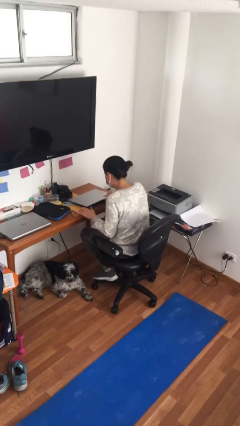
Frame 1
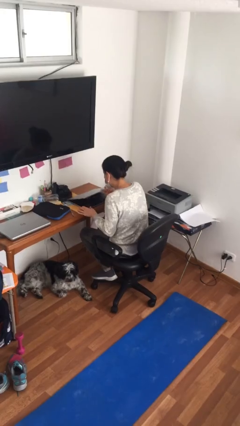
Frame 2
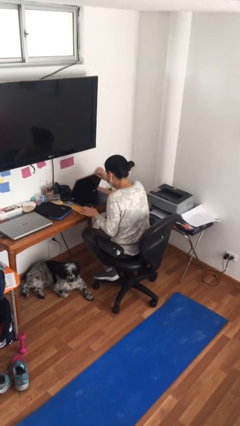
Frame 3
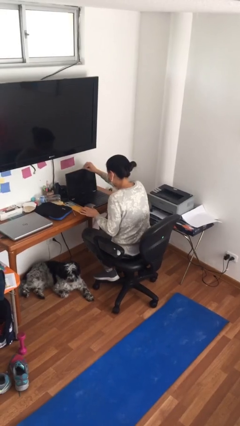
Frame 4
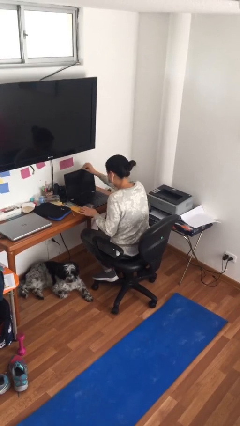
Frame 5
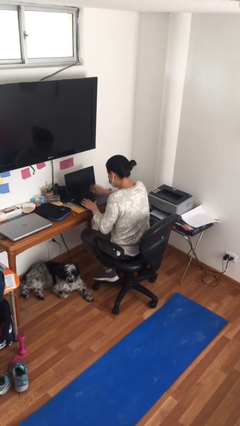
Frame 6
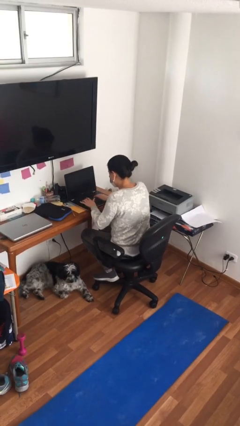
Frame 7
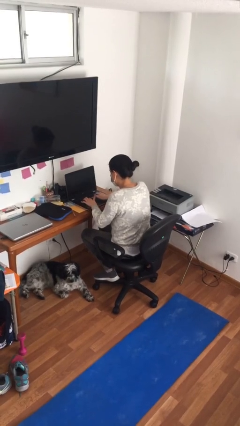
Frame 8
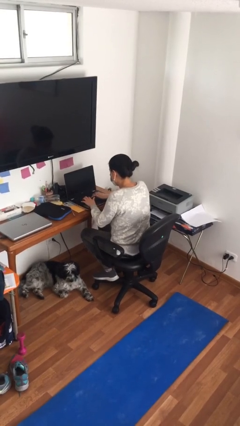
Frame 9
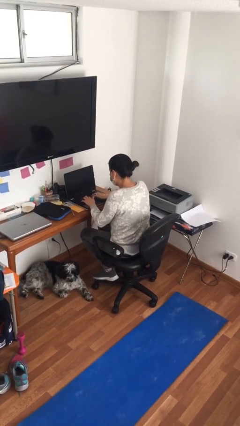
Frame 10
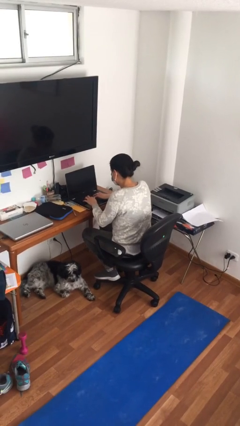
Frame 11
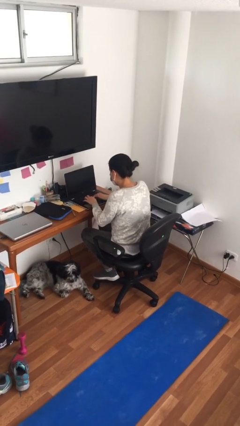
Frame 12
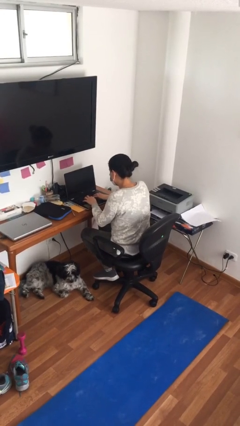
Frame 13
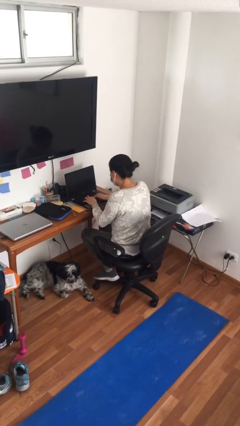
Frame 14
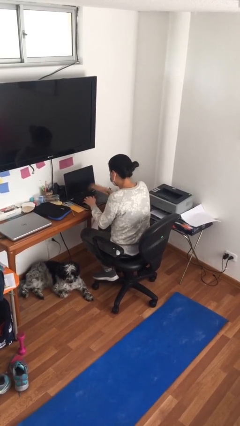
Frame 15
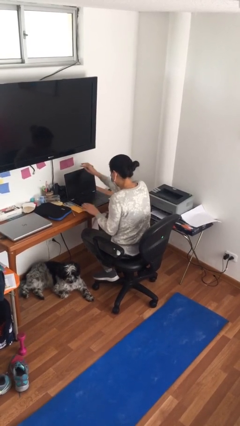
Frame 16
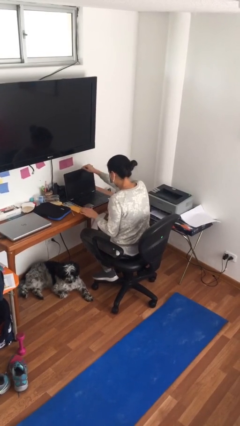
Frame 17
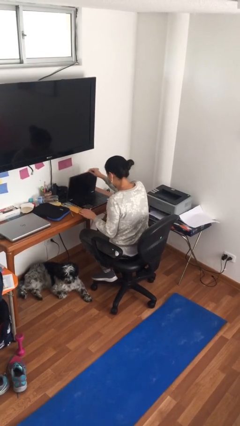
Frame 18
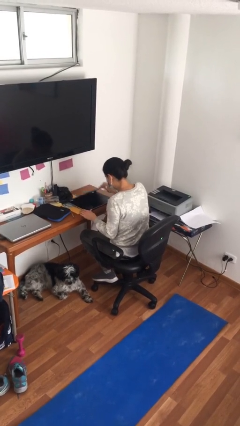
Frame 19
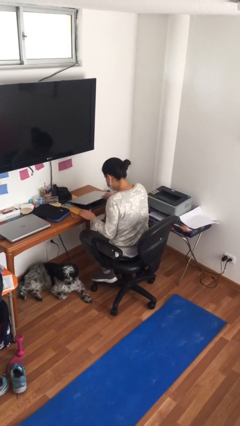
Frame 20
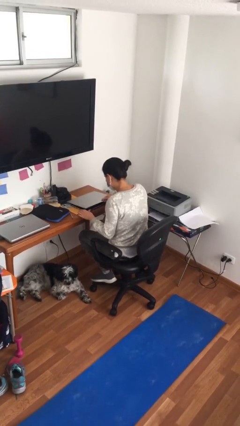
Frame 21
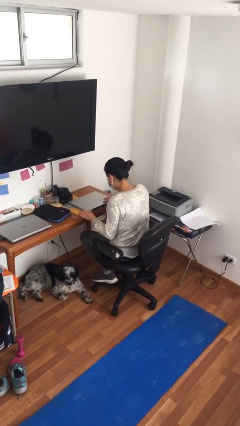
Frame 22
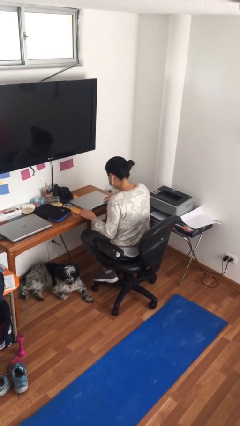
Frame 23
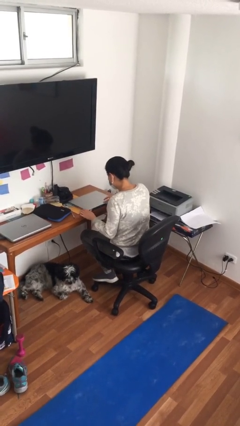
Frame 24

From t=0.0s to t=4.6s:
person interacts with laptop

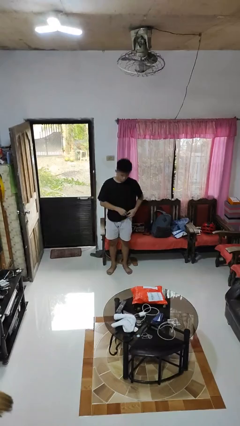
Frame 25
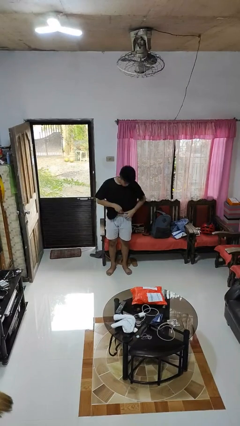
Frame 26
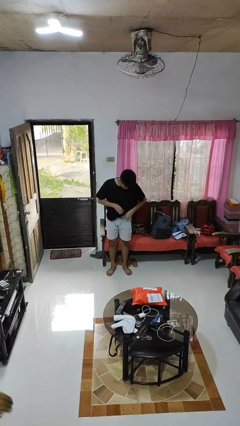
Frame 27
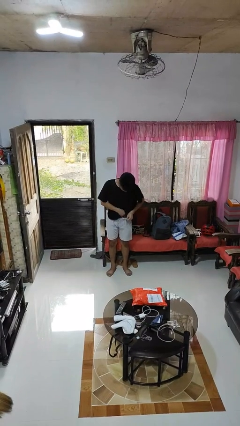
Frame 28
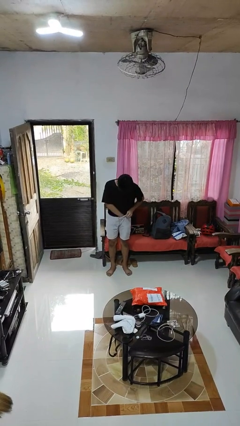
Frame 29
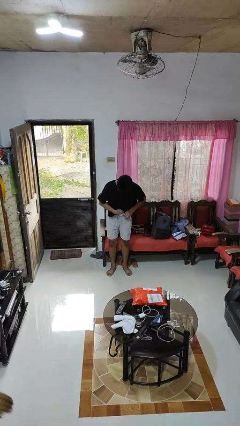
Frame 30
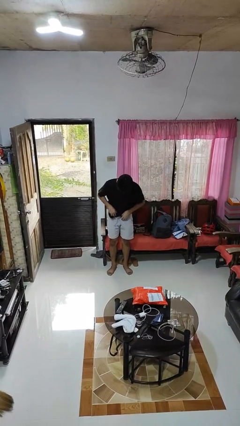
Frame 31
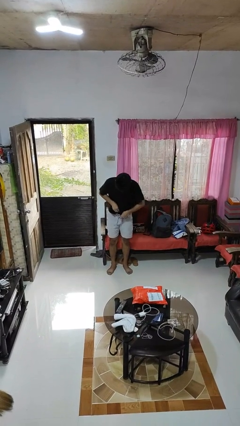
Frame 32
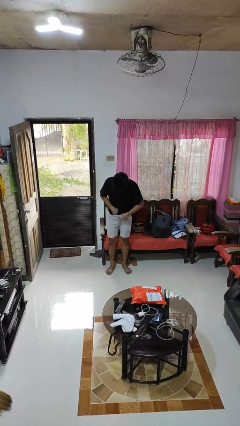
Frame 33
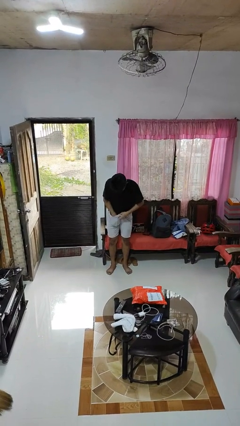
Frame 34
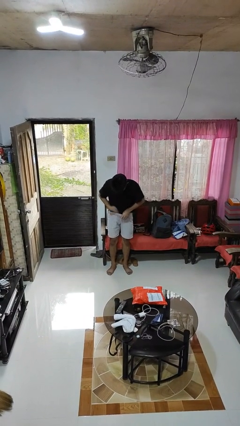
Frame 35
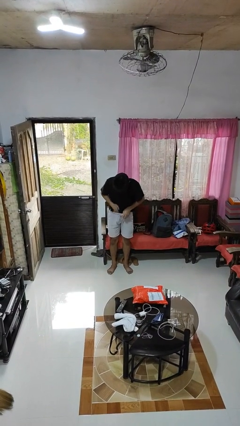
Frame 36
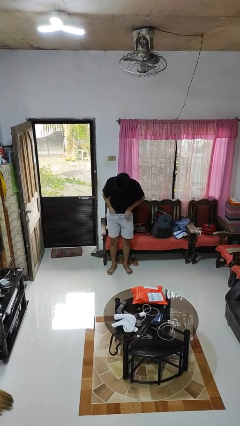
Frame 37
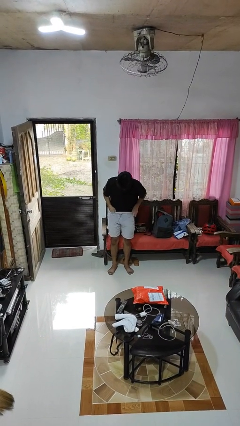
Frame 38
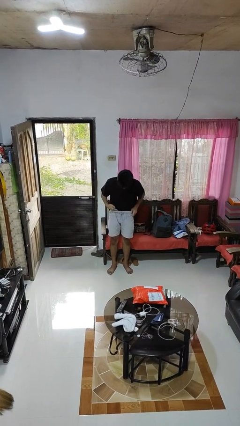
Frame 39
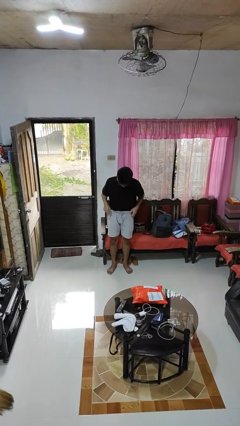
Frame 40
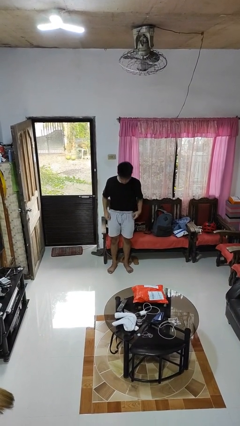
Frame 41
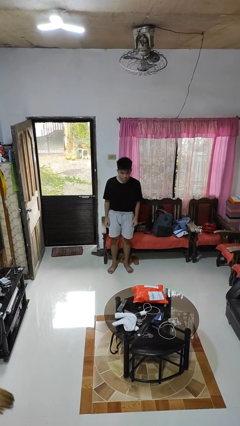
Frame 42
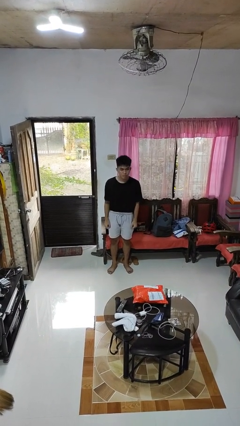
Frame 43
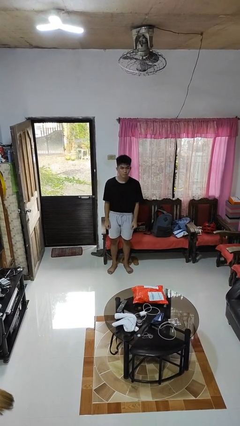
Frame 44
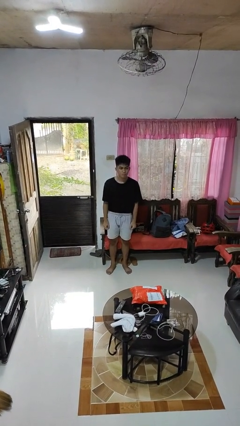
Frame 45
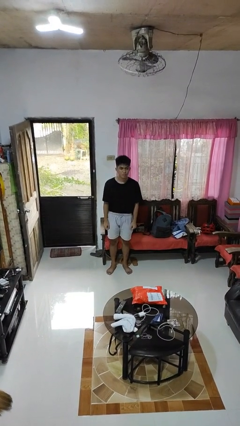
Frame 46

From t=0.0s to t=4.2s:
person tucks in shirt

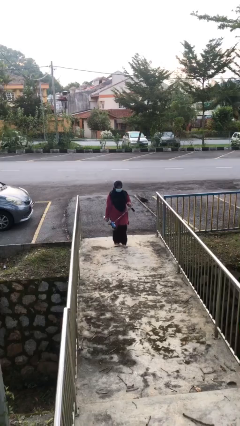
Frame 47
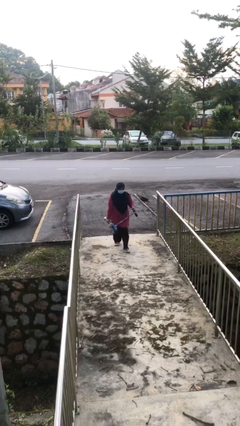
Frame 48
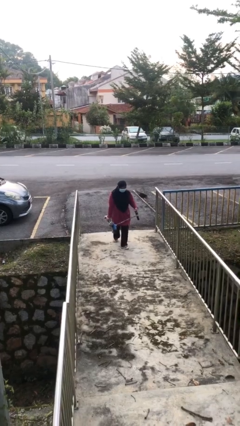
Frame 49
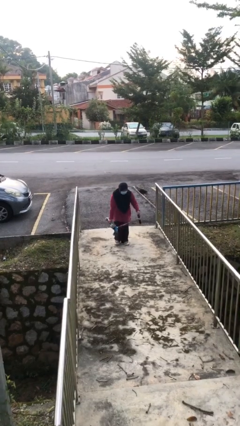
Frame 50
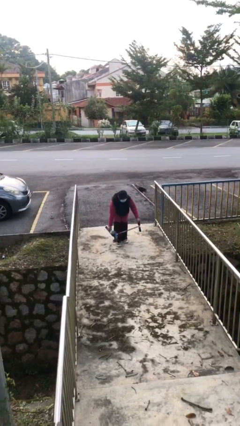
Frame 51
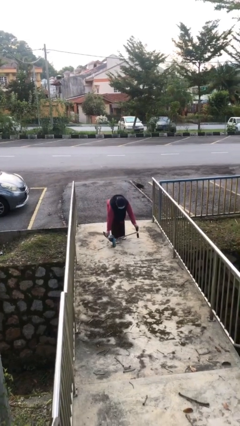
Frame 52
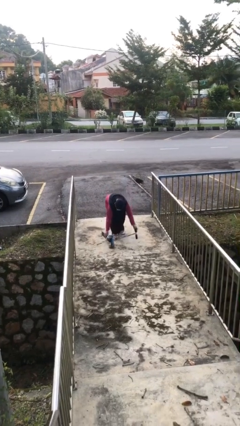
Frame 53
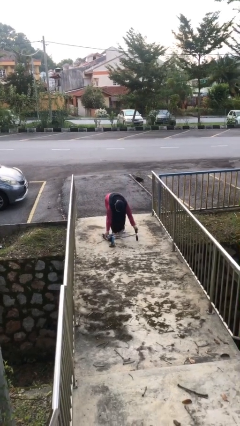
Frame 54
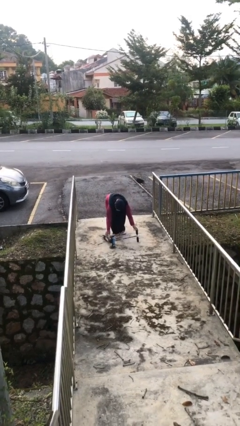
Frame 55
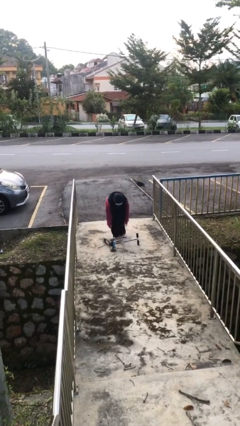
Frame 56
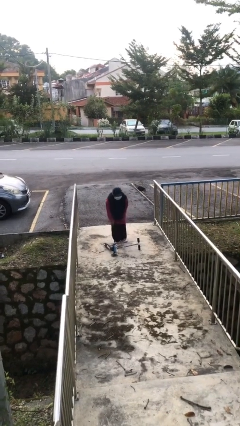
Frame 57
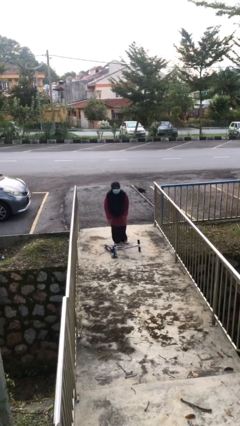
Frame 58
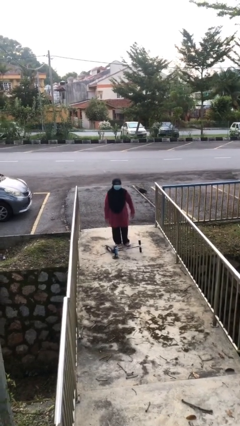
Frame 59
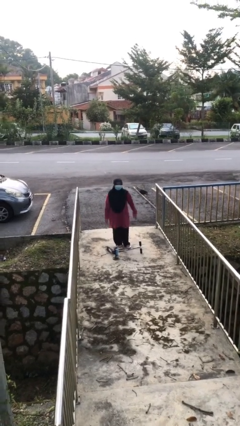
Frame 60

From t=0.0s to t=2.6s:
person puts down object on floor

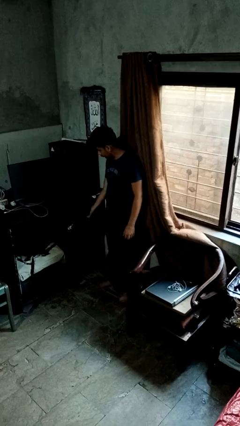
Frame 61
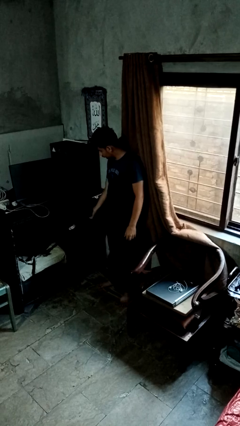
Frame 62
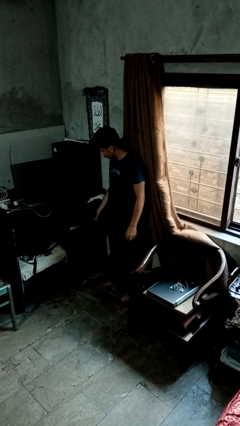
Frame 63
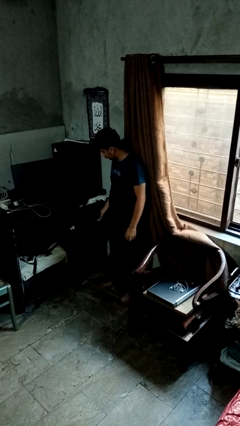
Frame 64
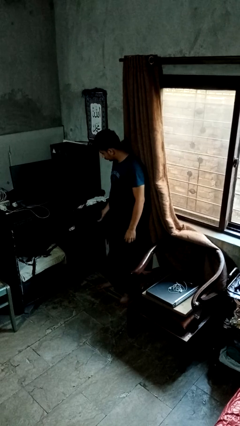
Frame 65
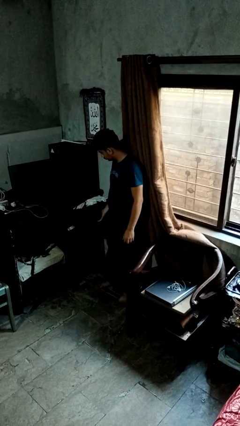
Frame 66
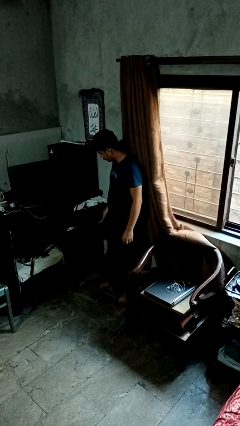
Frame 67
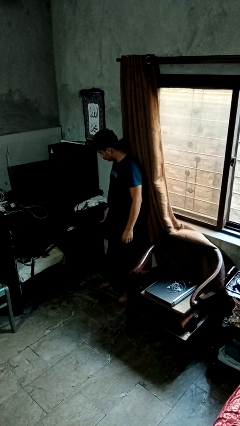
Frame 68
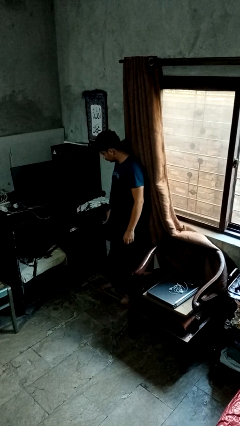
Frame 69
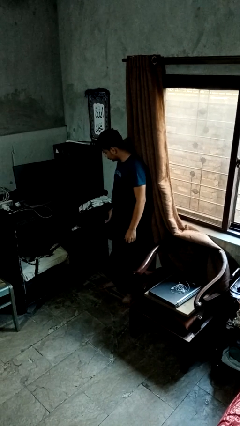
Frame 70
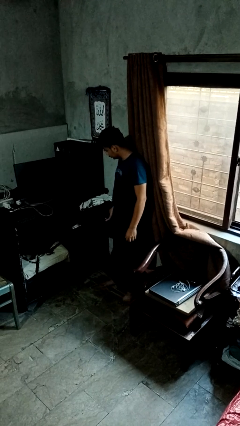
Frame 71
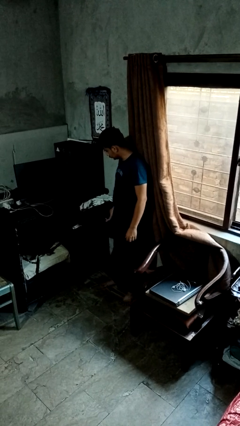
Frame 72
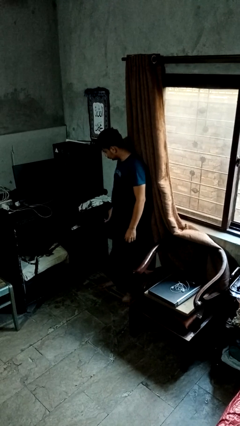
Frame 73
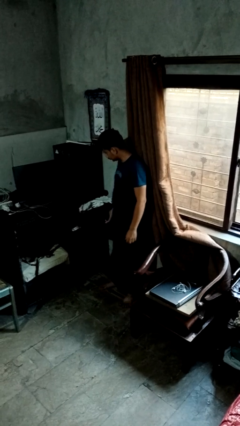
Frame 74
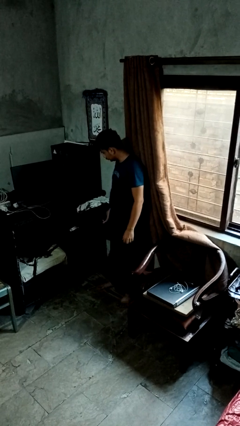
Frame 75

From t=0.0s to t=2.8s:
person opens dresser drawer

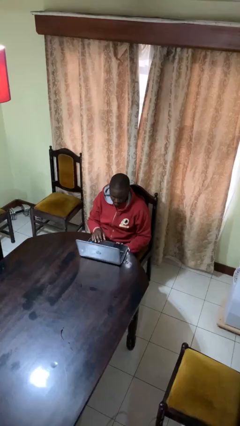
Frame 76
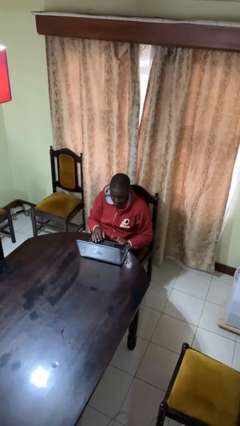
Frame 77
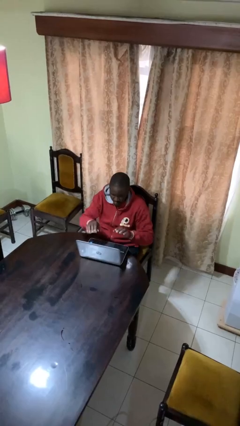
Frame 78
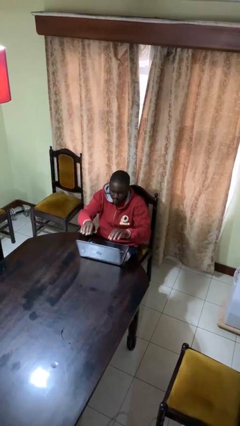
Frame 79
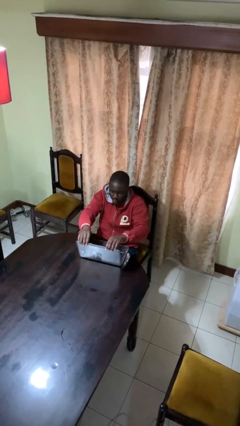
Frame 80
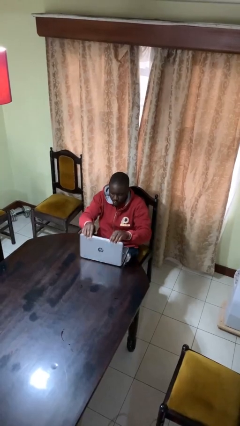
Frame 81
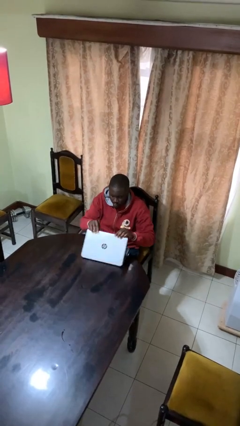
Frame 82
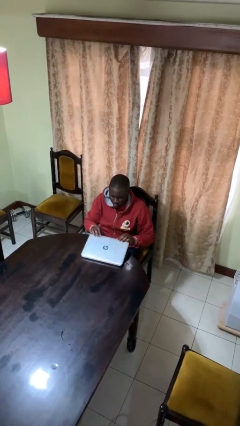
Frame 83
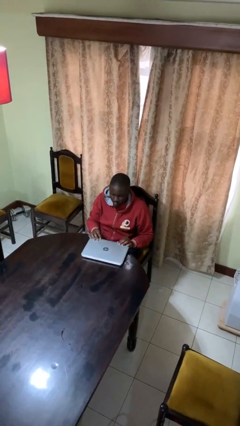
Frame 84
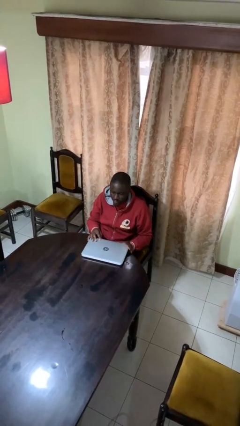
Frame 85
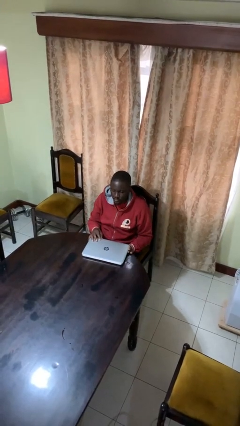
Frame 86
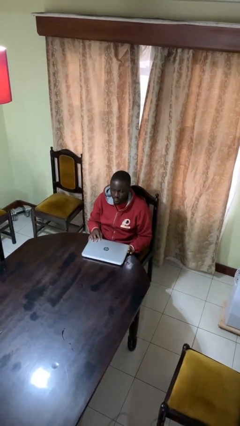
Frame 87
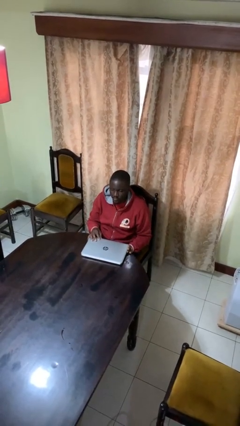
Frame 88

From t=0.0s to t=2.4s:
person closes laptop

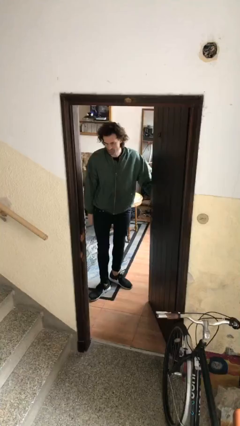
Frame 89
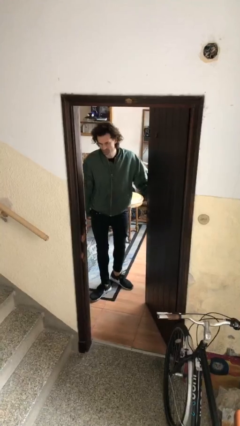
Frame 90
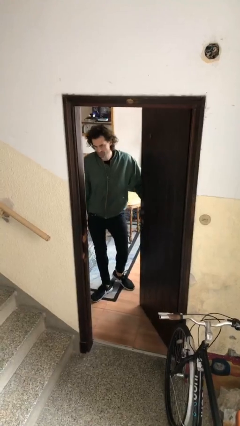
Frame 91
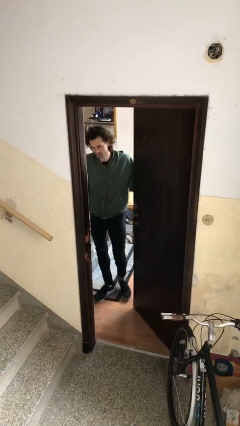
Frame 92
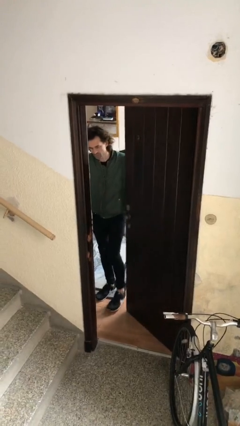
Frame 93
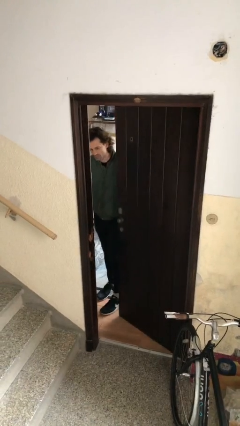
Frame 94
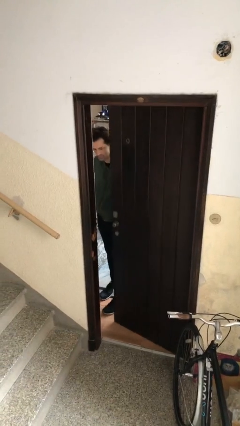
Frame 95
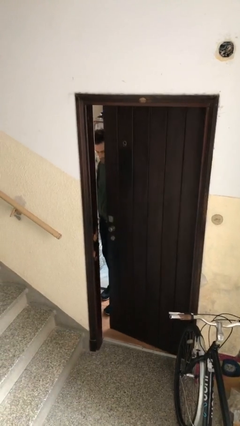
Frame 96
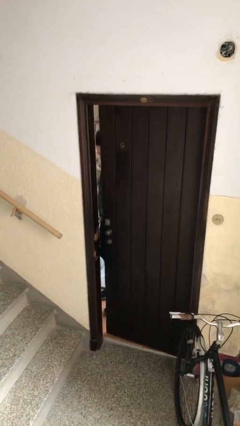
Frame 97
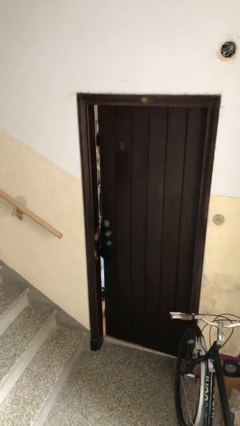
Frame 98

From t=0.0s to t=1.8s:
person closes facility door
